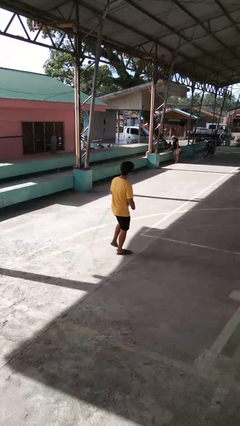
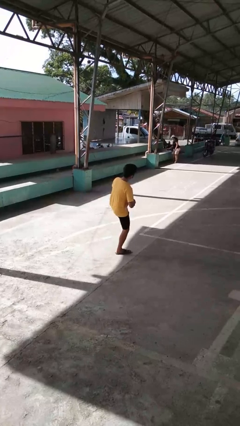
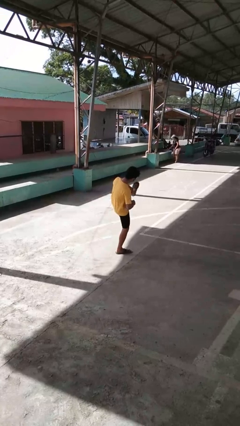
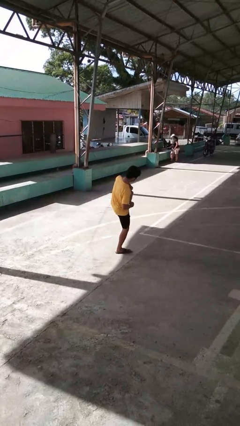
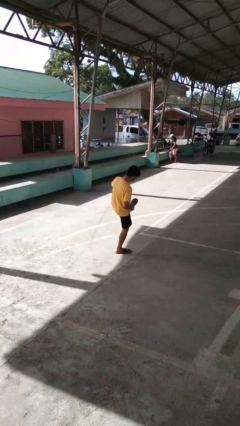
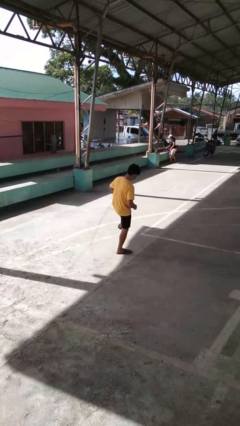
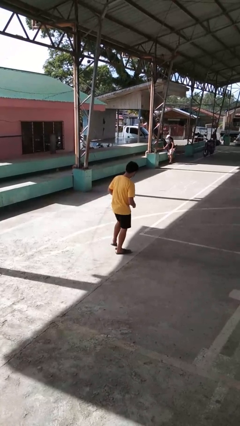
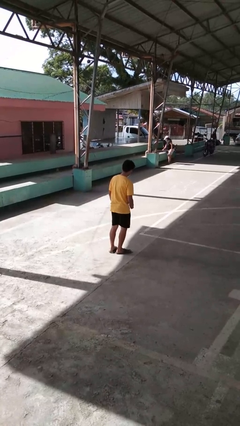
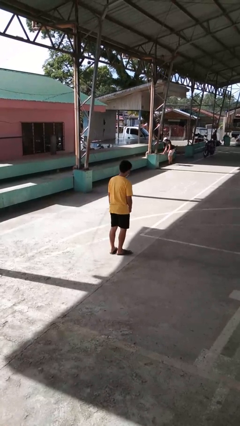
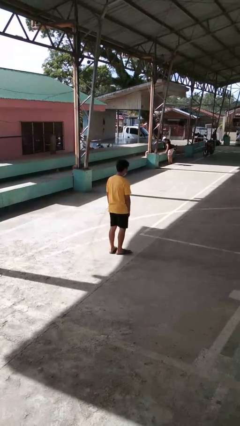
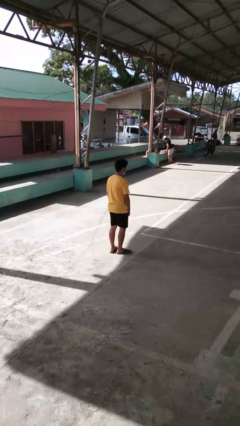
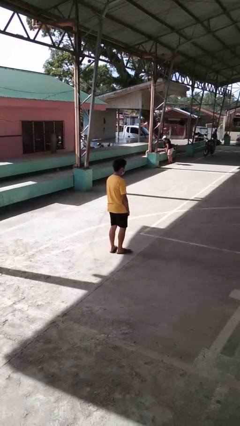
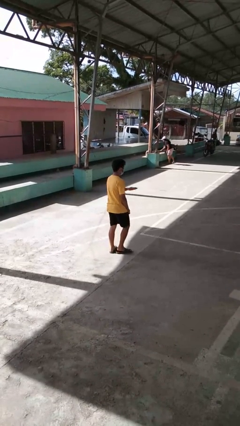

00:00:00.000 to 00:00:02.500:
person karate kicks

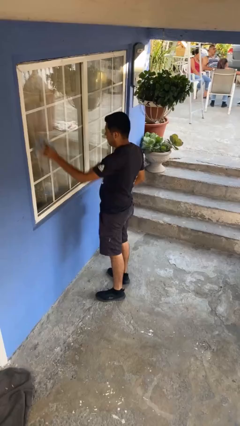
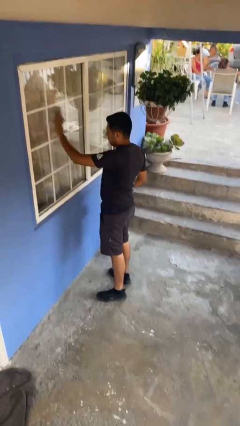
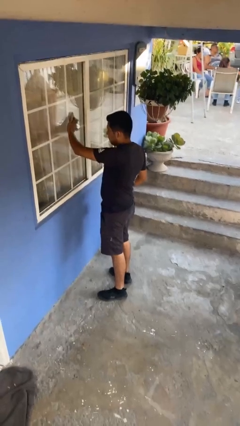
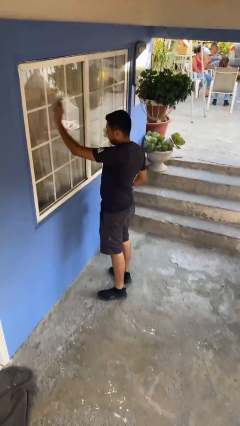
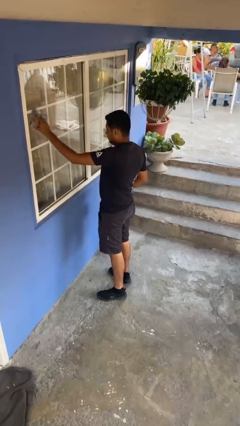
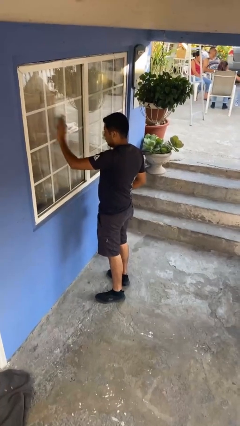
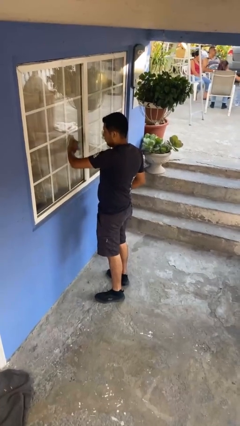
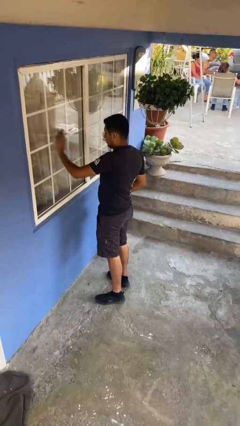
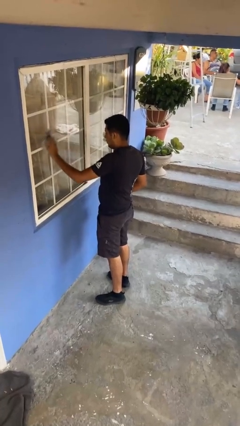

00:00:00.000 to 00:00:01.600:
person washes window

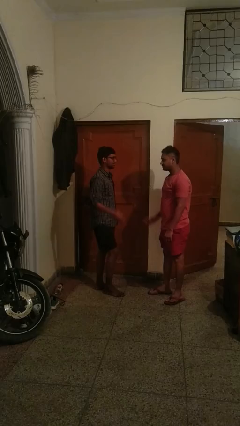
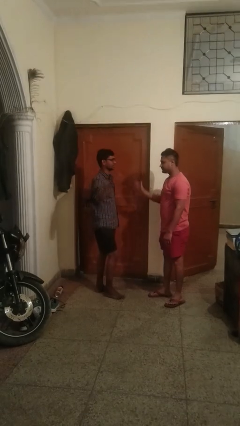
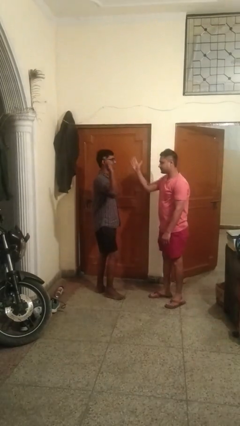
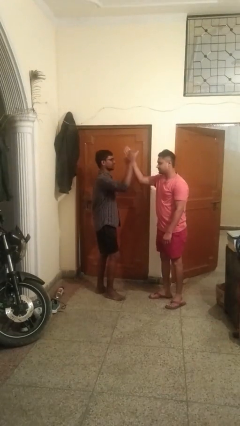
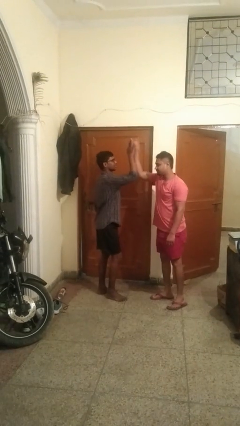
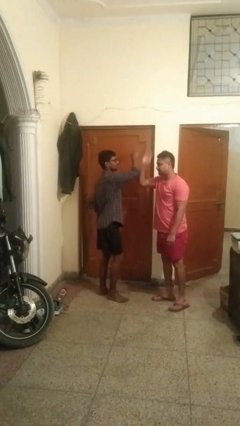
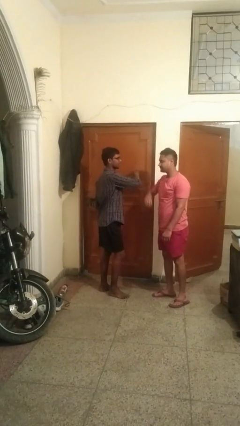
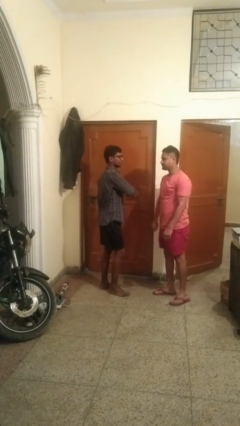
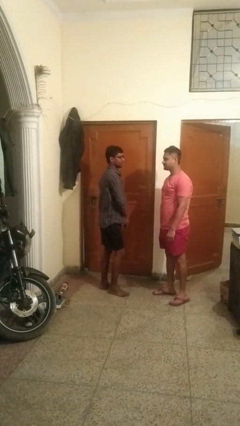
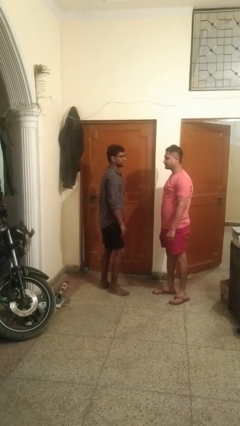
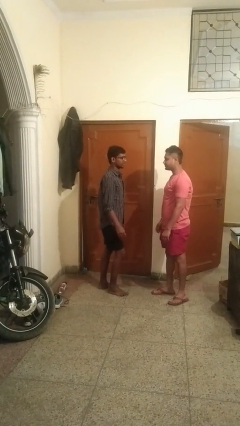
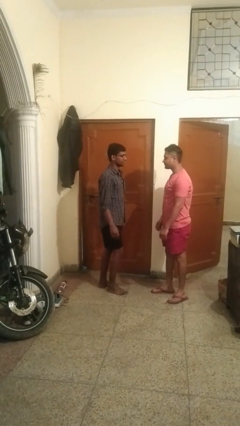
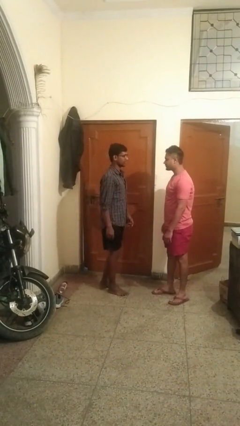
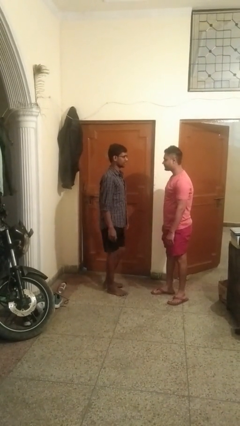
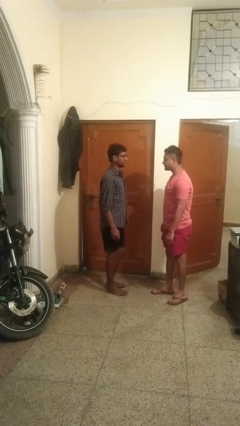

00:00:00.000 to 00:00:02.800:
person highfives hand

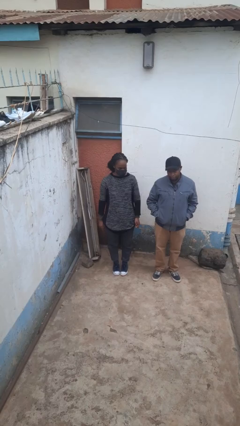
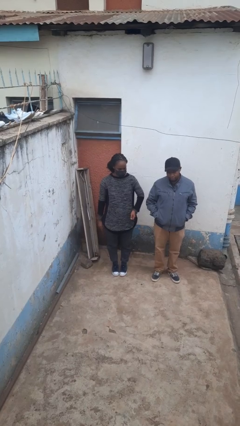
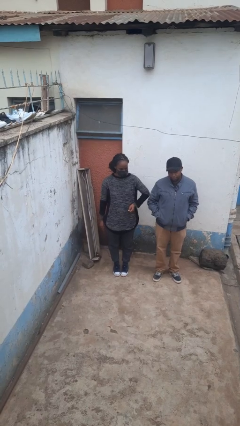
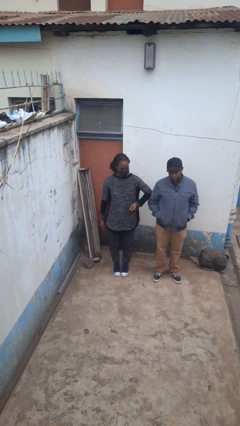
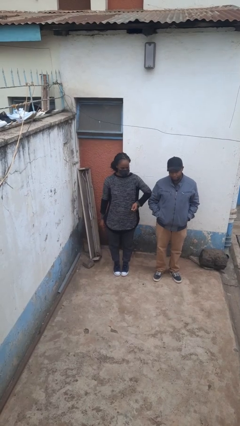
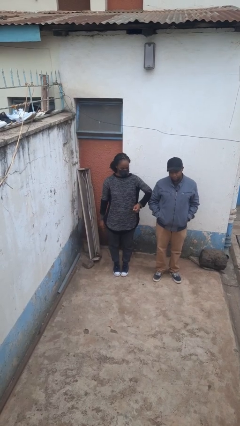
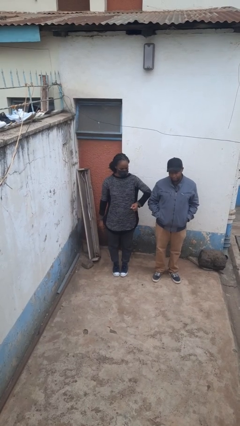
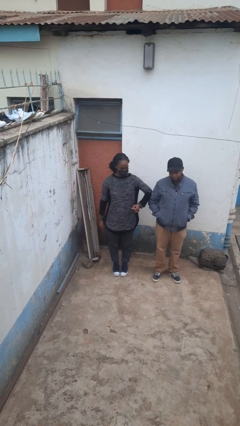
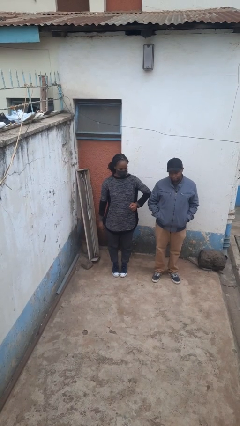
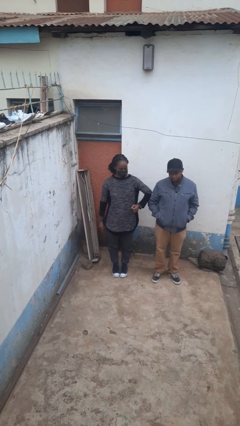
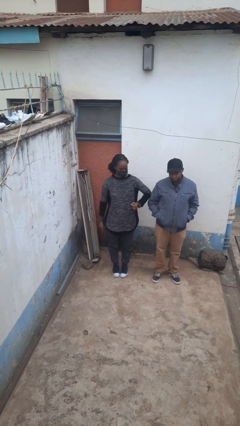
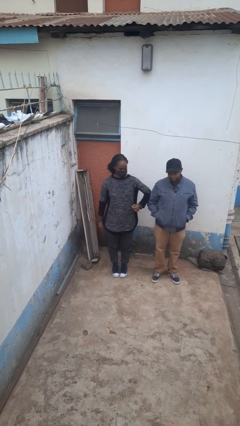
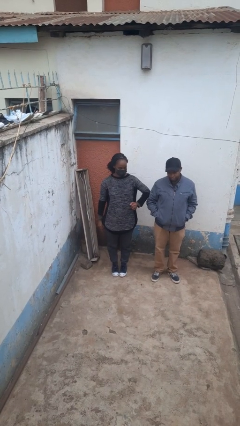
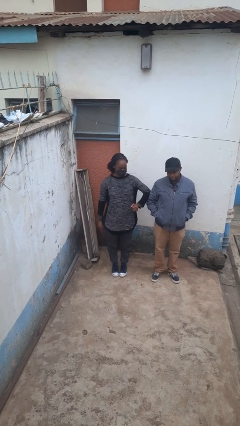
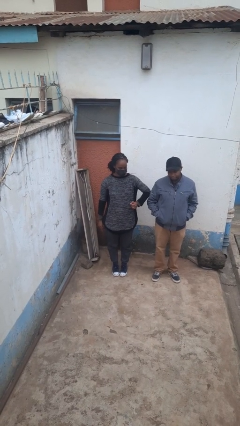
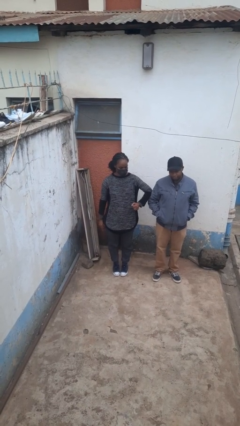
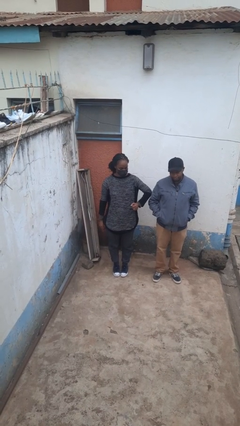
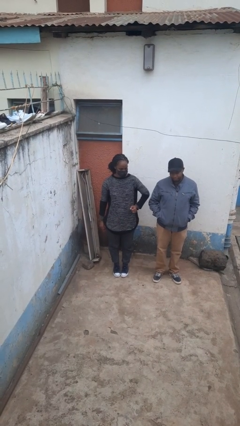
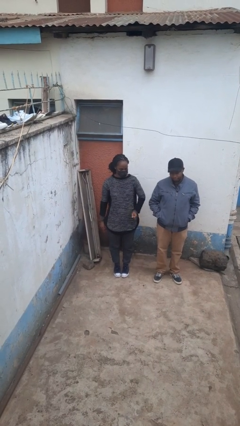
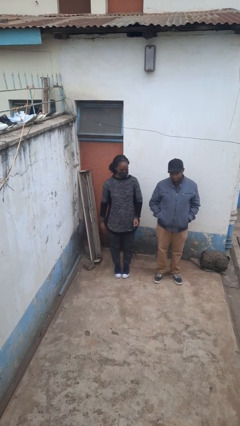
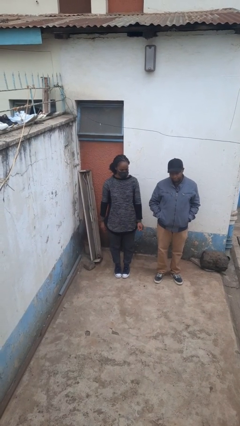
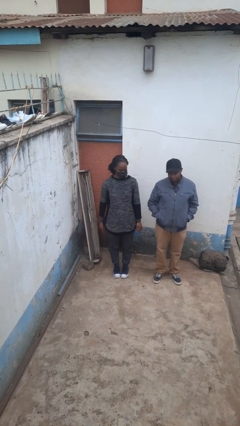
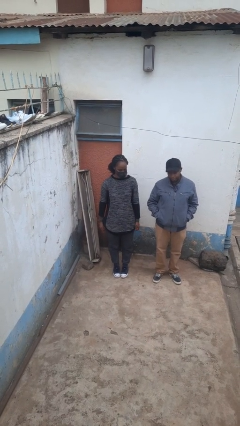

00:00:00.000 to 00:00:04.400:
person nudges person with elbow

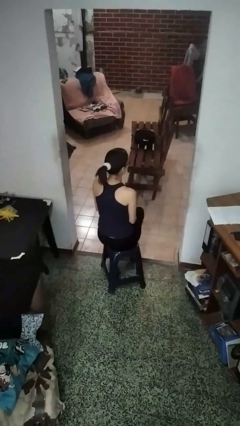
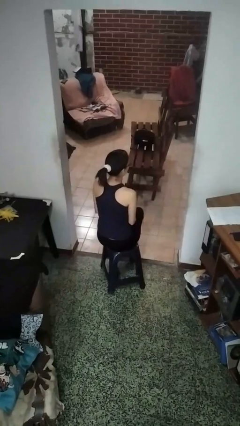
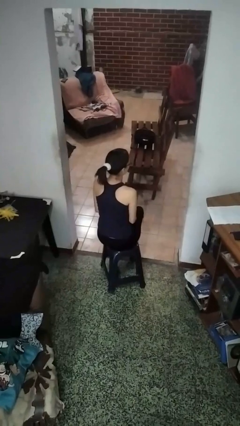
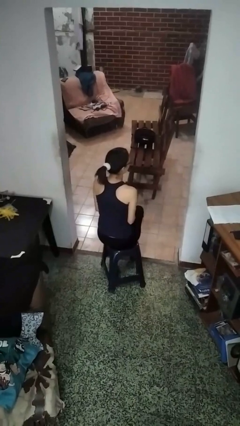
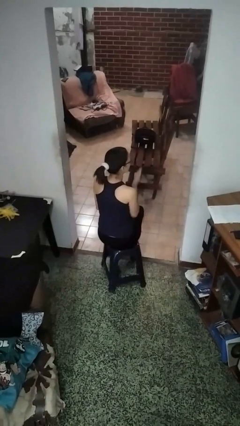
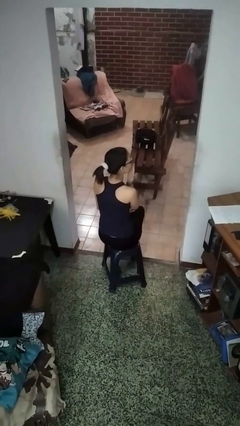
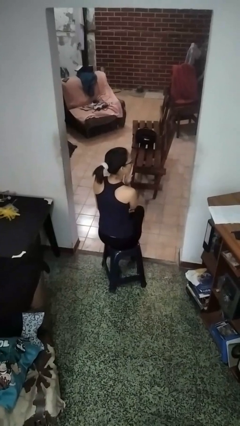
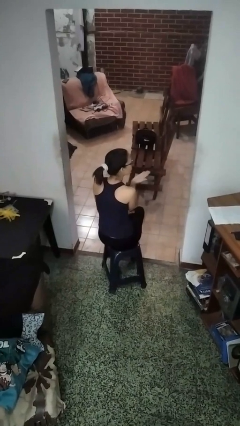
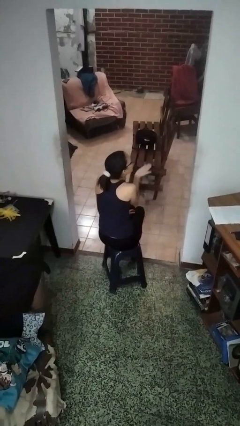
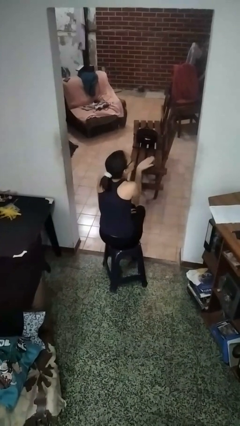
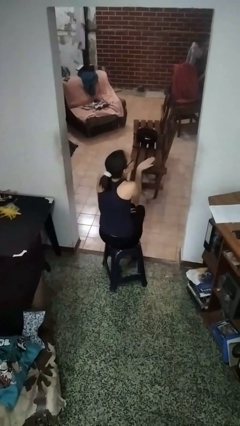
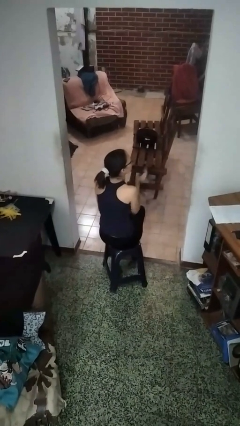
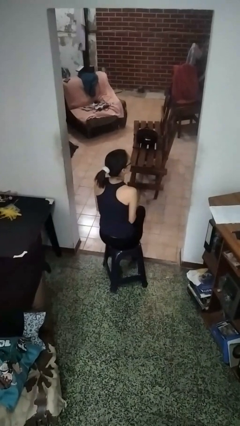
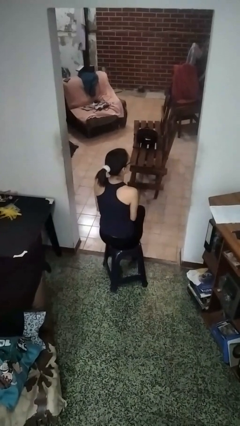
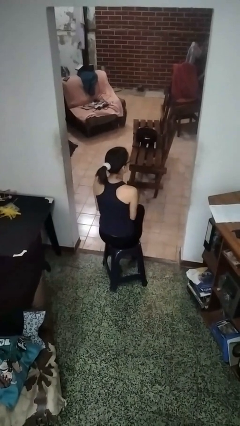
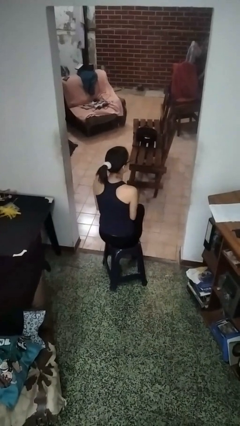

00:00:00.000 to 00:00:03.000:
person gestures blow kiss

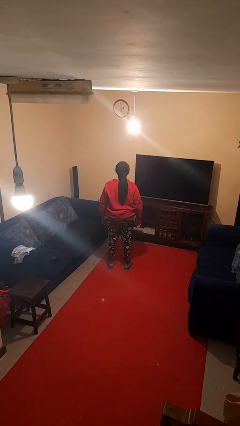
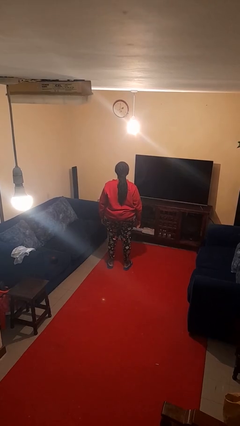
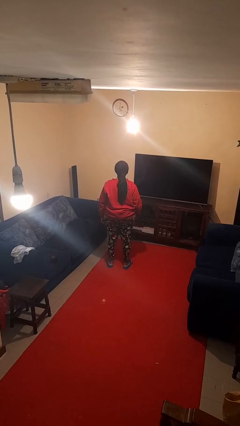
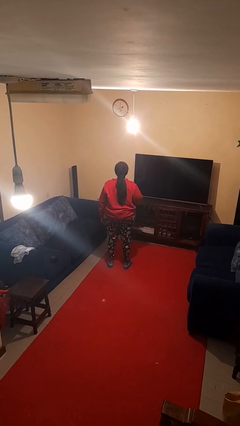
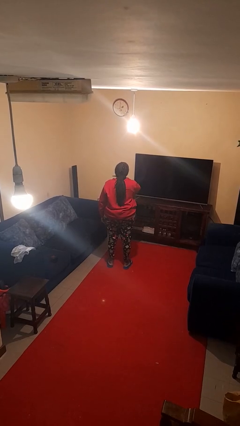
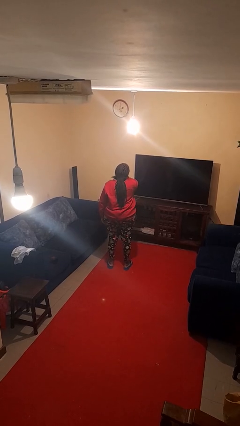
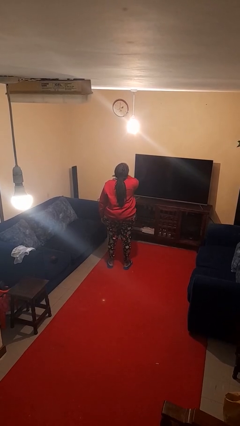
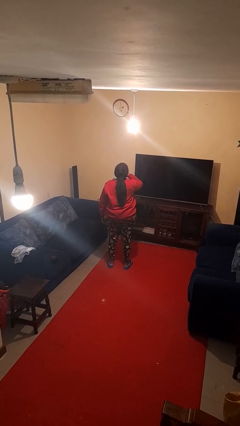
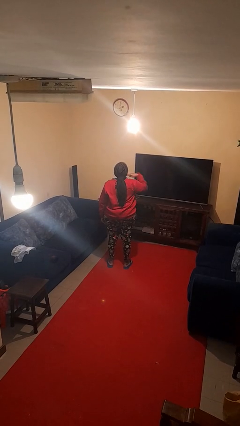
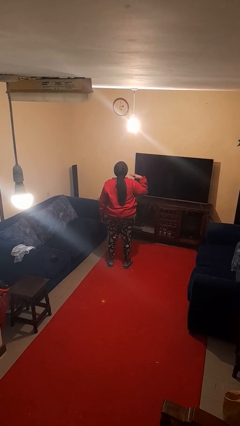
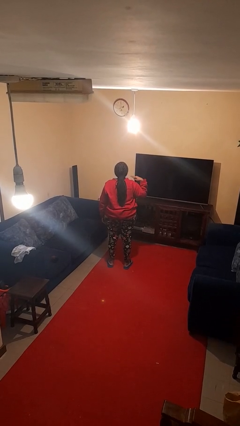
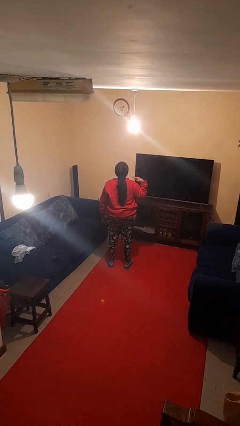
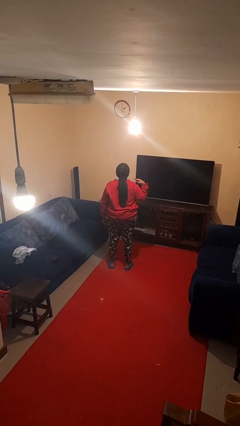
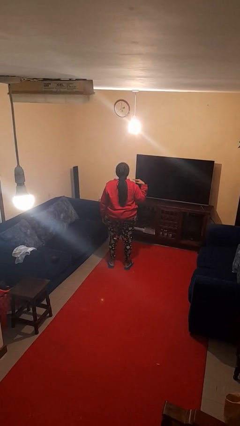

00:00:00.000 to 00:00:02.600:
person gestures cut

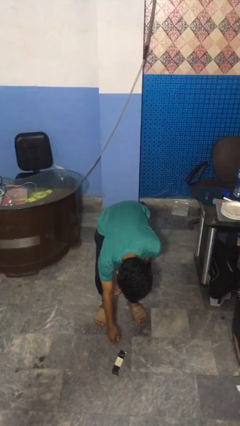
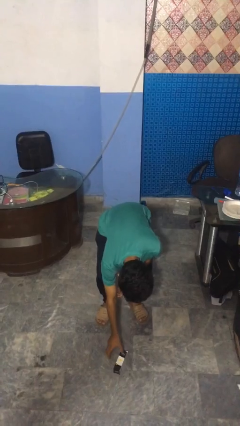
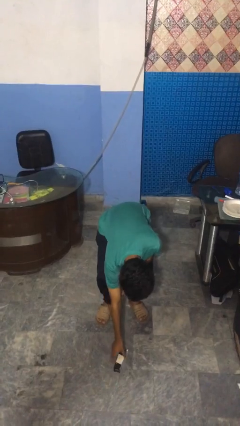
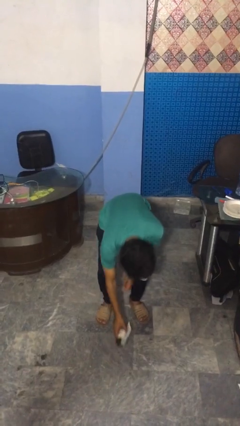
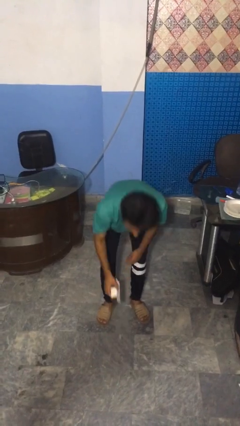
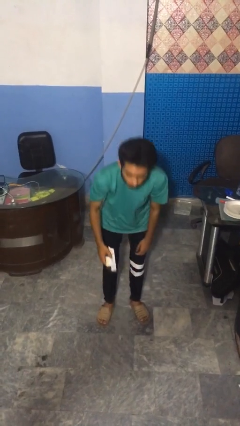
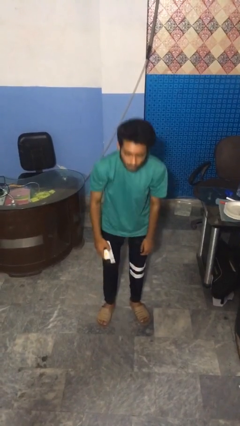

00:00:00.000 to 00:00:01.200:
person picks up object from floor
